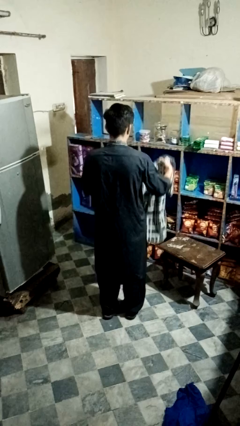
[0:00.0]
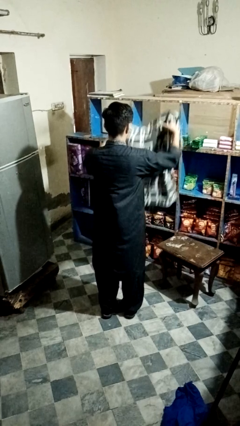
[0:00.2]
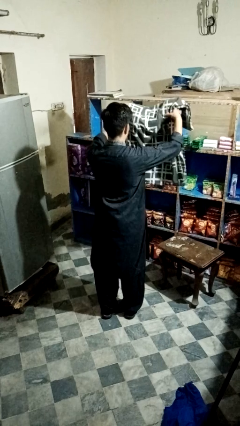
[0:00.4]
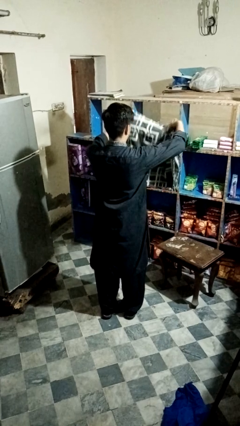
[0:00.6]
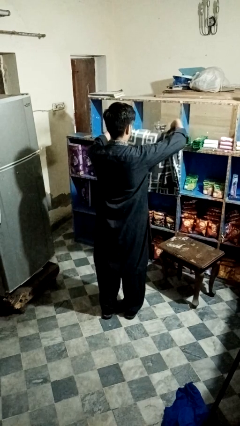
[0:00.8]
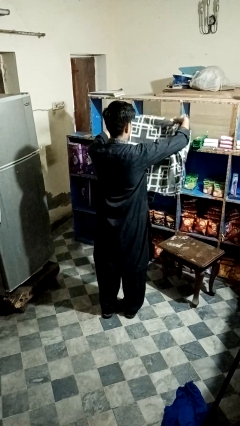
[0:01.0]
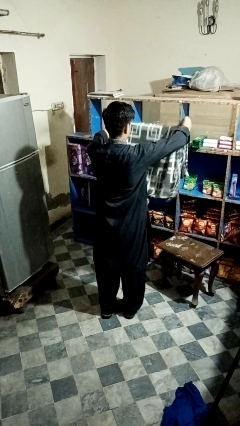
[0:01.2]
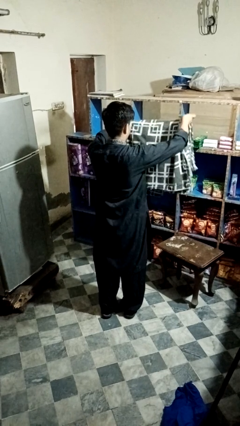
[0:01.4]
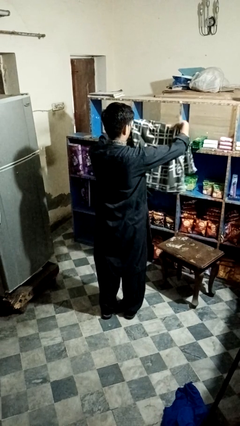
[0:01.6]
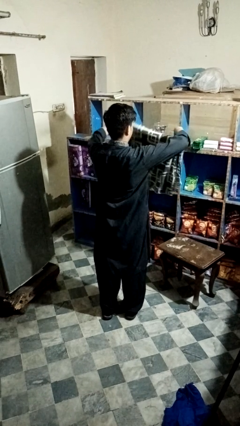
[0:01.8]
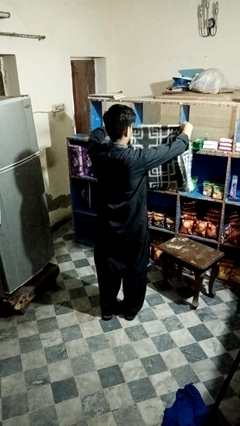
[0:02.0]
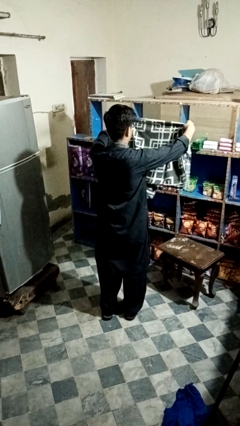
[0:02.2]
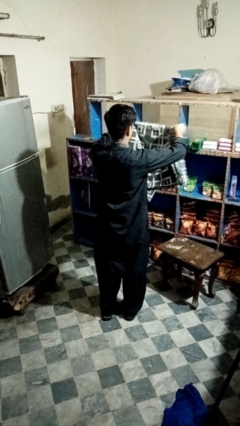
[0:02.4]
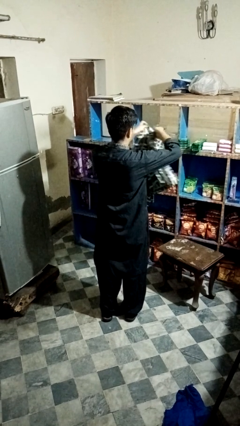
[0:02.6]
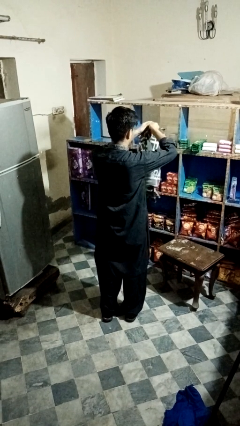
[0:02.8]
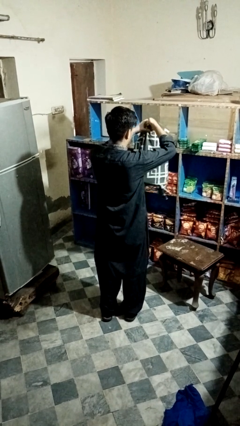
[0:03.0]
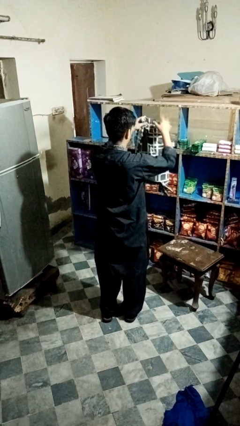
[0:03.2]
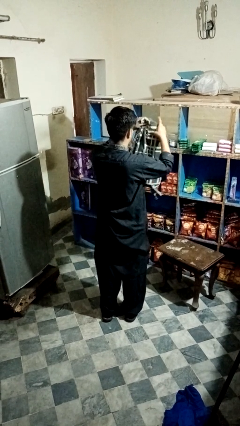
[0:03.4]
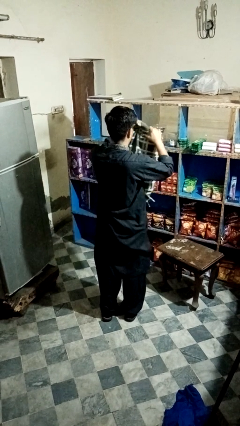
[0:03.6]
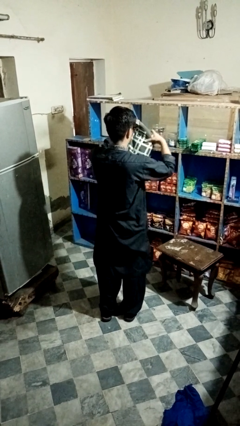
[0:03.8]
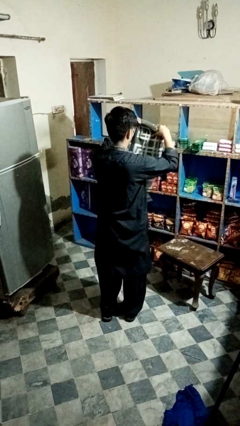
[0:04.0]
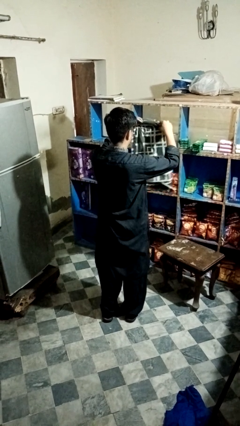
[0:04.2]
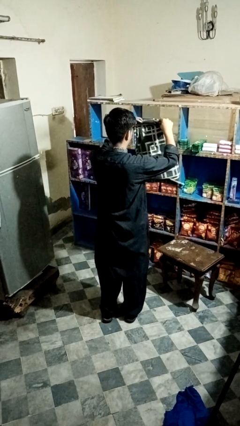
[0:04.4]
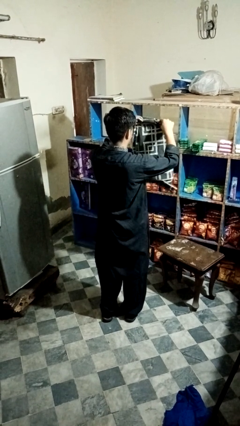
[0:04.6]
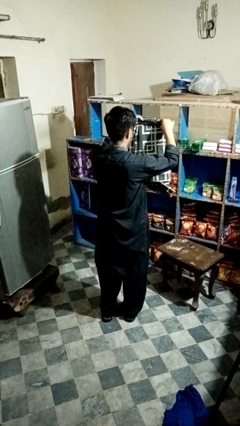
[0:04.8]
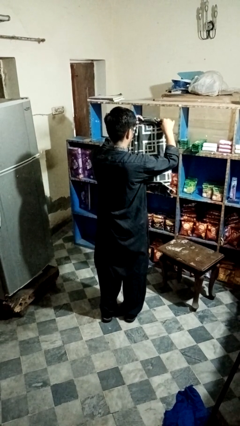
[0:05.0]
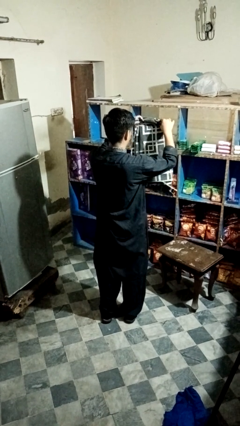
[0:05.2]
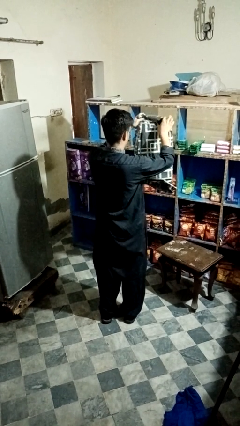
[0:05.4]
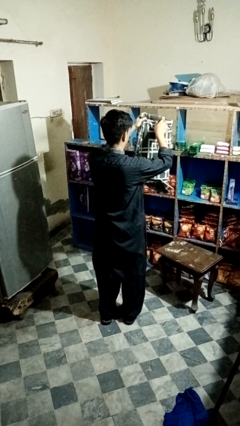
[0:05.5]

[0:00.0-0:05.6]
person folds blanket

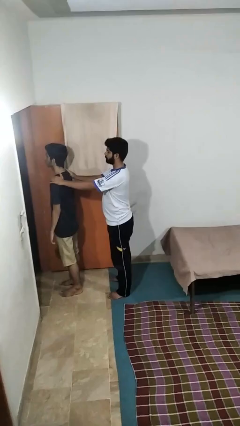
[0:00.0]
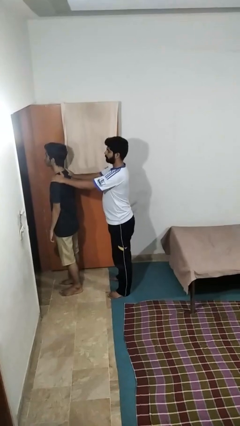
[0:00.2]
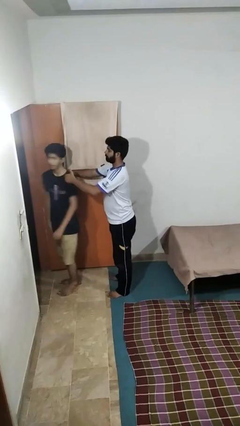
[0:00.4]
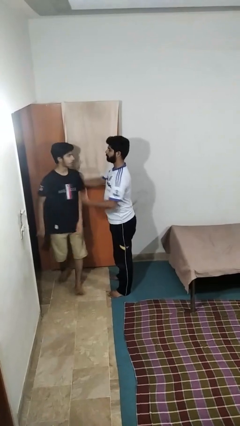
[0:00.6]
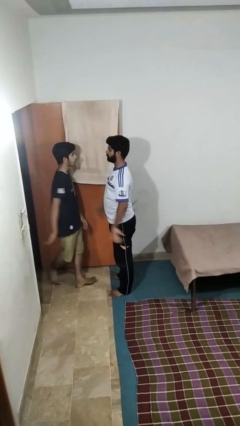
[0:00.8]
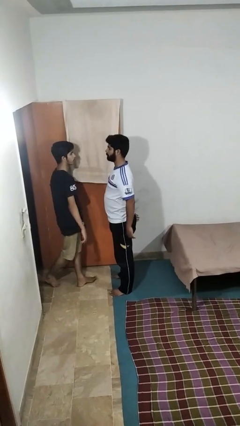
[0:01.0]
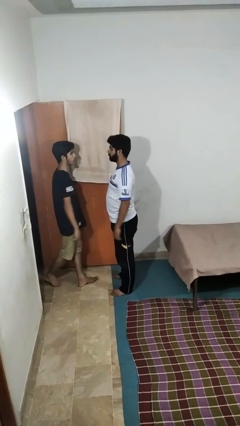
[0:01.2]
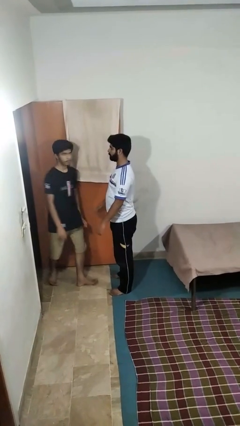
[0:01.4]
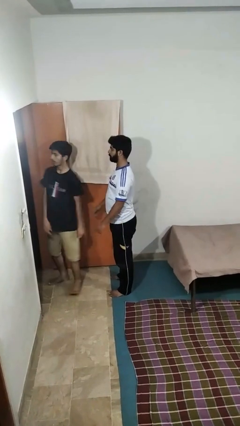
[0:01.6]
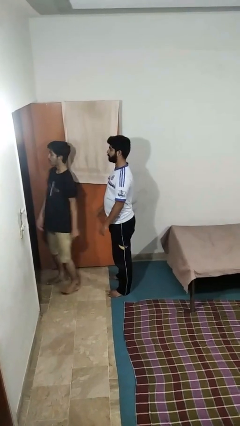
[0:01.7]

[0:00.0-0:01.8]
person spins person around

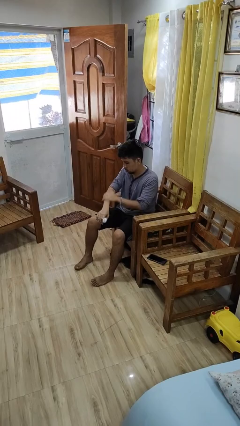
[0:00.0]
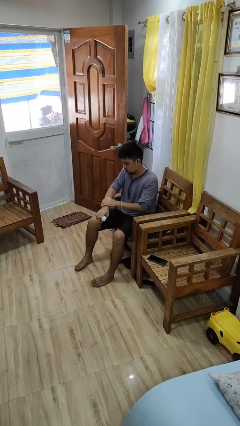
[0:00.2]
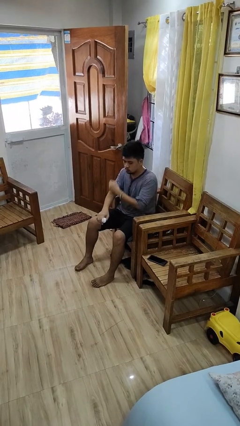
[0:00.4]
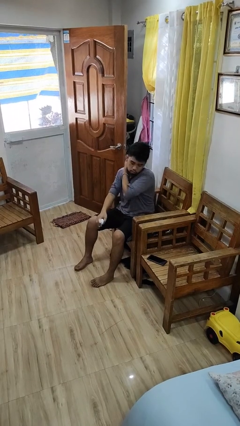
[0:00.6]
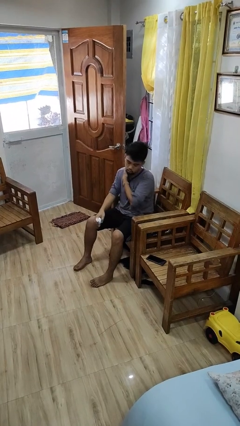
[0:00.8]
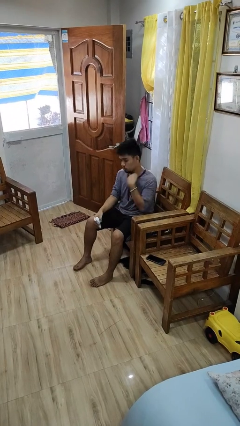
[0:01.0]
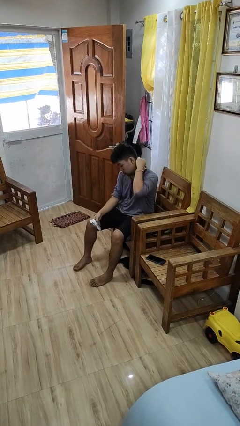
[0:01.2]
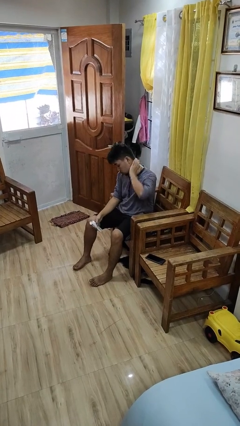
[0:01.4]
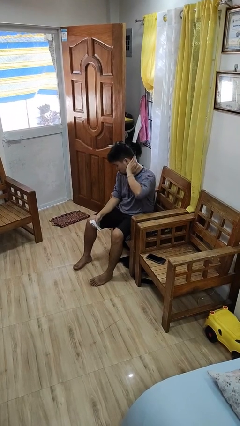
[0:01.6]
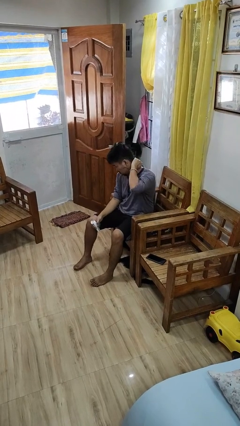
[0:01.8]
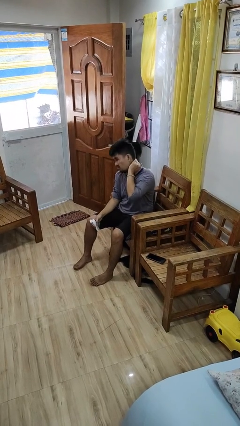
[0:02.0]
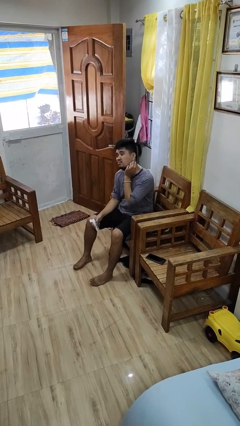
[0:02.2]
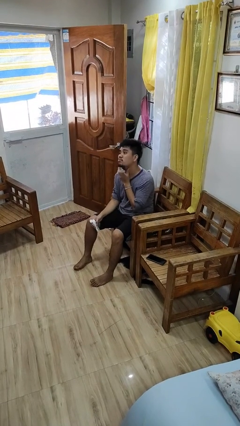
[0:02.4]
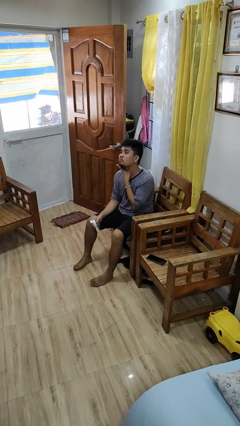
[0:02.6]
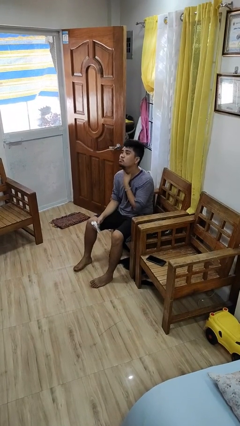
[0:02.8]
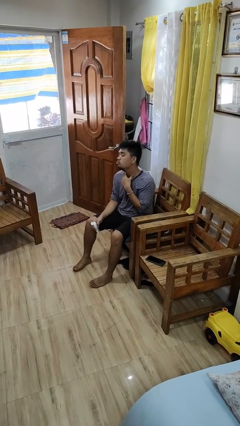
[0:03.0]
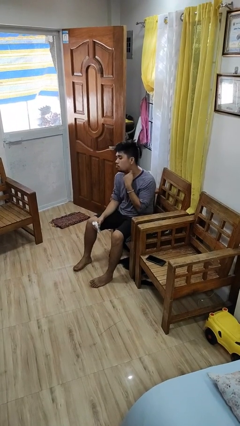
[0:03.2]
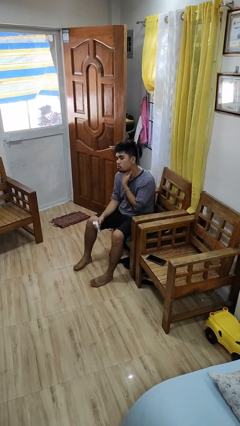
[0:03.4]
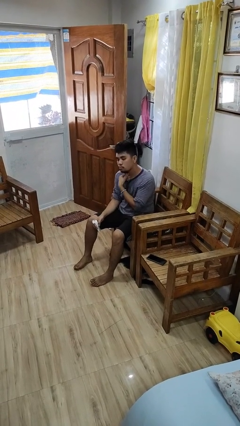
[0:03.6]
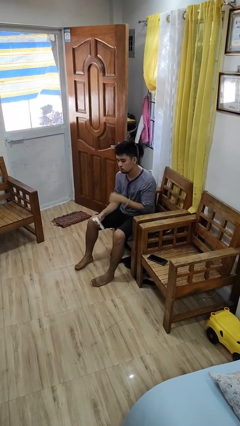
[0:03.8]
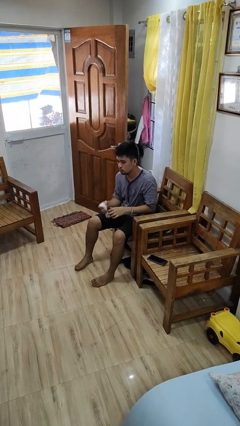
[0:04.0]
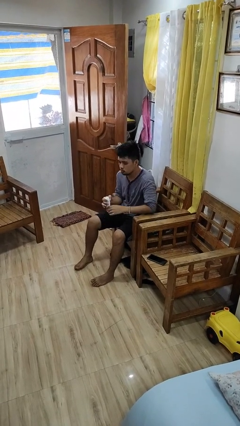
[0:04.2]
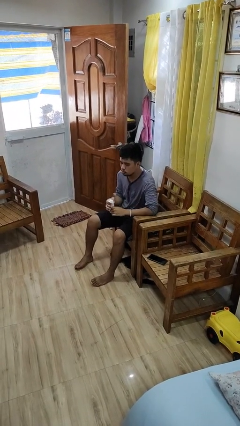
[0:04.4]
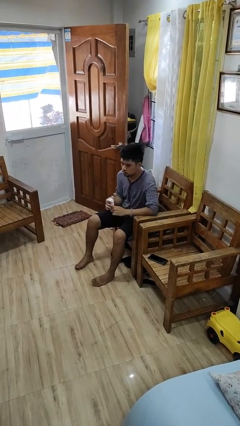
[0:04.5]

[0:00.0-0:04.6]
person applies sunscreen

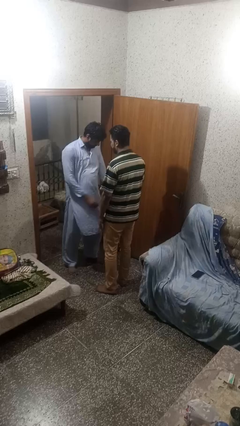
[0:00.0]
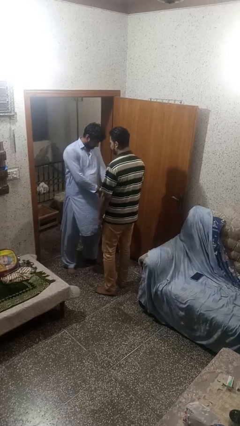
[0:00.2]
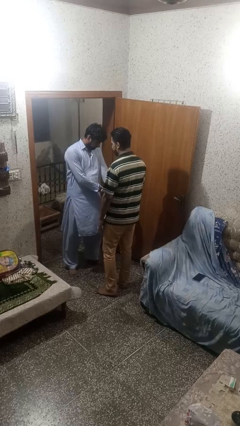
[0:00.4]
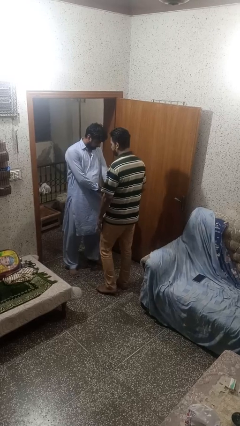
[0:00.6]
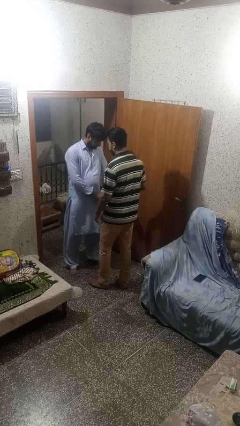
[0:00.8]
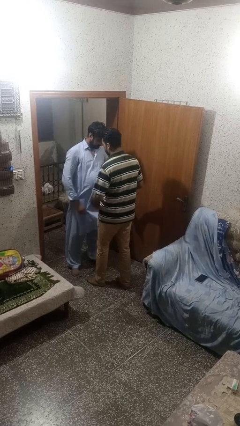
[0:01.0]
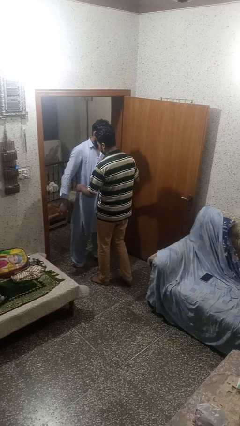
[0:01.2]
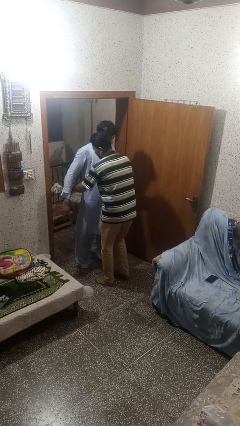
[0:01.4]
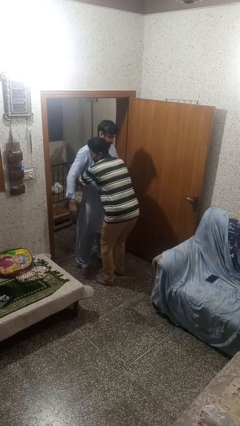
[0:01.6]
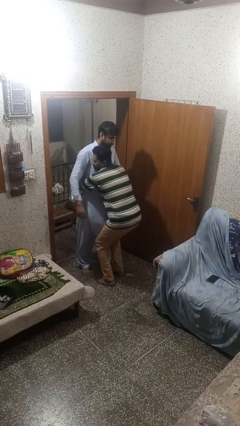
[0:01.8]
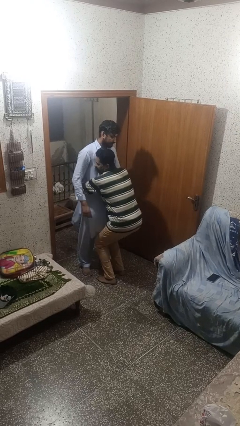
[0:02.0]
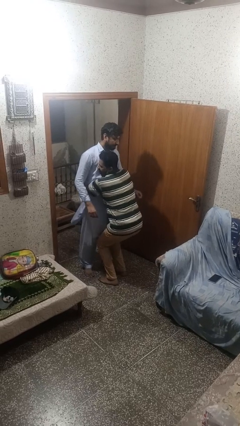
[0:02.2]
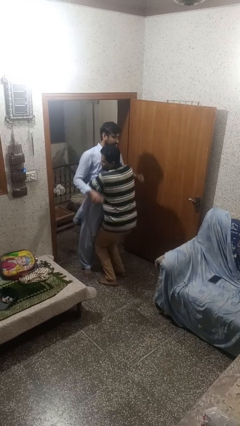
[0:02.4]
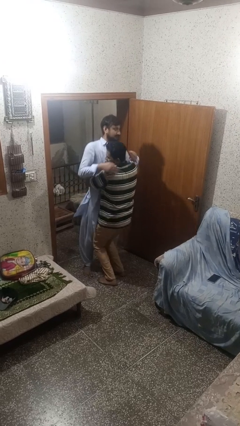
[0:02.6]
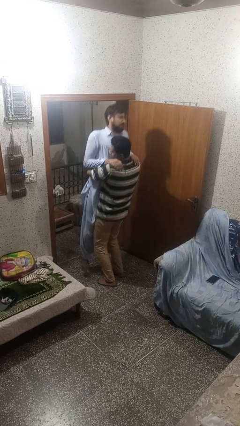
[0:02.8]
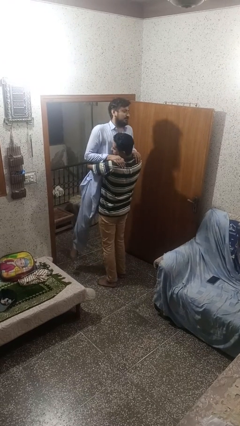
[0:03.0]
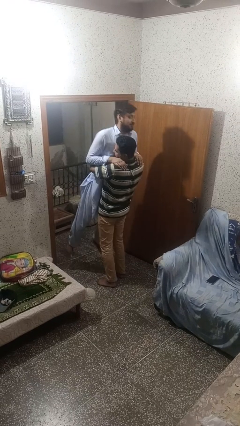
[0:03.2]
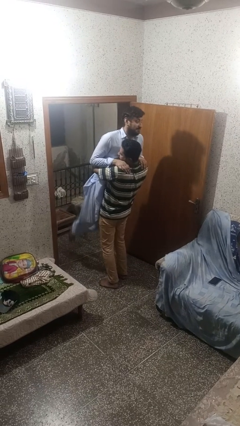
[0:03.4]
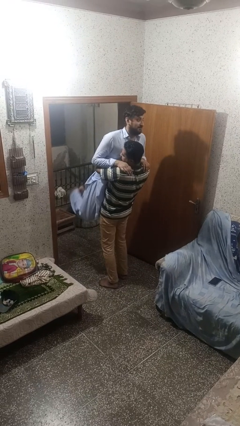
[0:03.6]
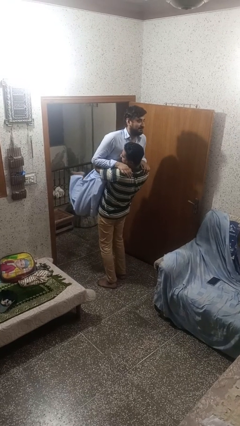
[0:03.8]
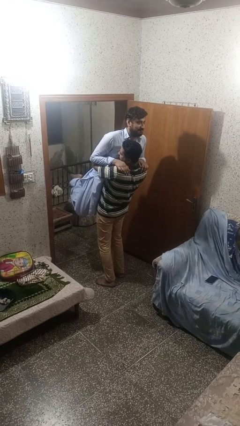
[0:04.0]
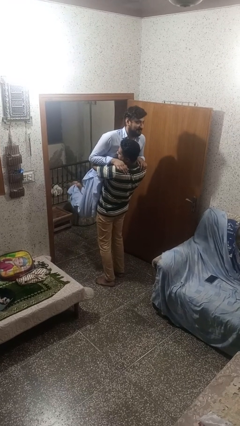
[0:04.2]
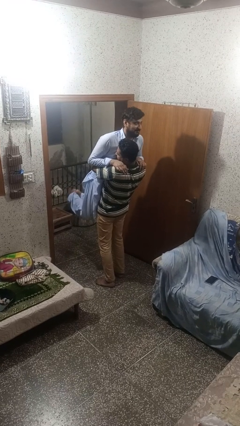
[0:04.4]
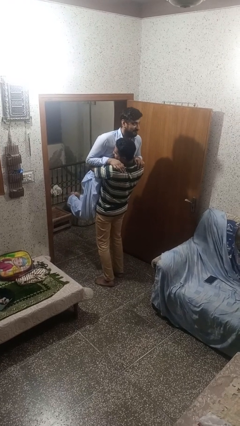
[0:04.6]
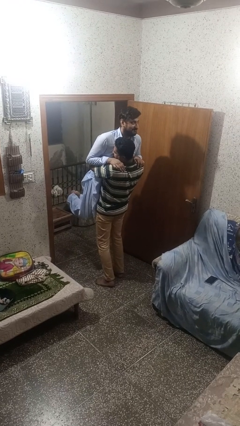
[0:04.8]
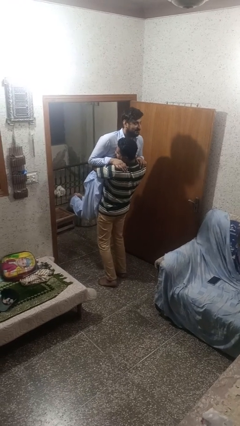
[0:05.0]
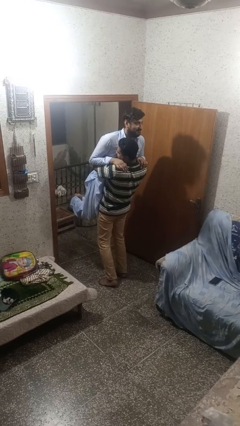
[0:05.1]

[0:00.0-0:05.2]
person picks up person

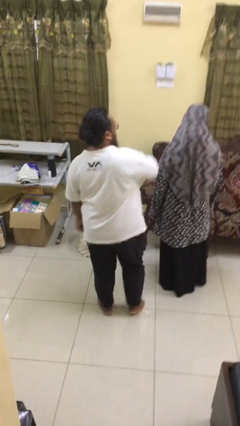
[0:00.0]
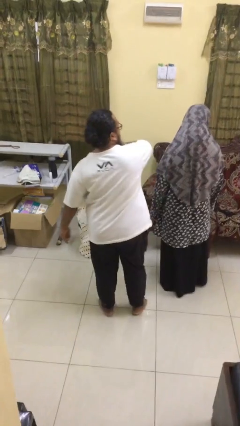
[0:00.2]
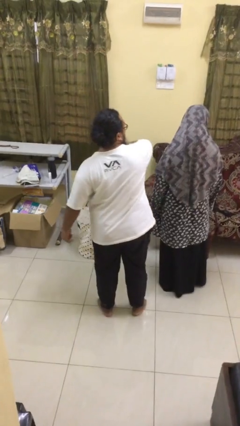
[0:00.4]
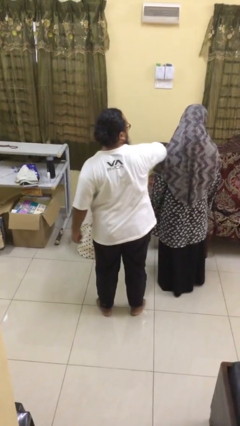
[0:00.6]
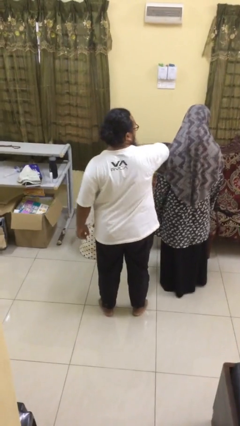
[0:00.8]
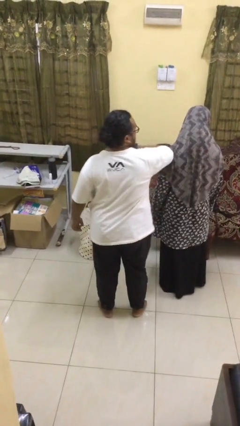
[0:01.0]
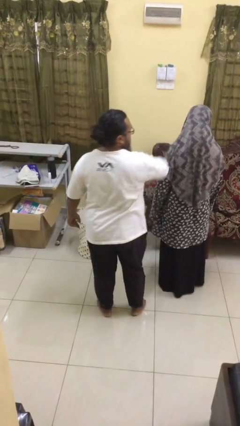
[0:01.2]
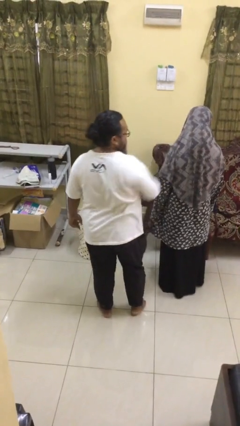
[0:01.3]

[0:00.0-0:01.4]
person nudges person with elbow
